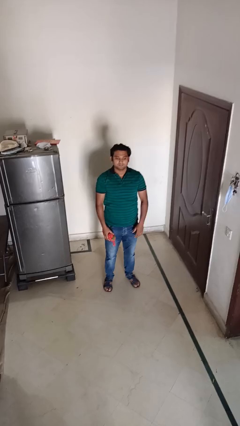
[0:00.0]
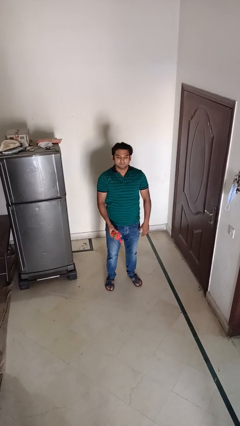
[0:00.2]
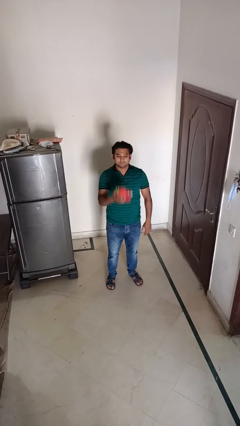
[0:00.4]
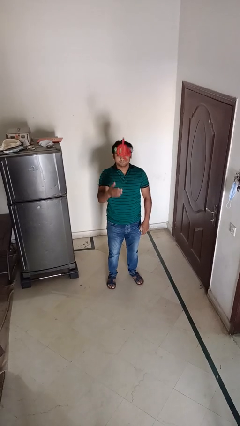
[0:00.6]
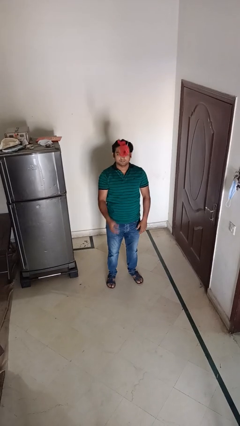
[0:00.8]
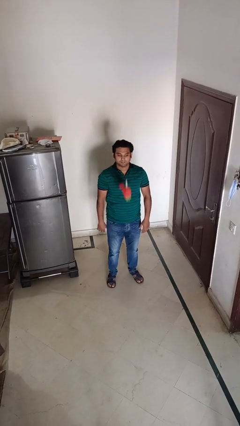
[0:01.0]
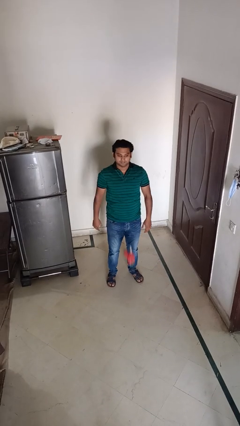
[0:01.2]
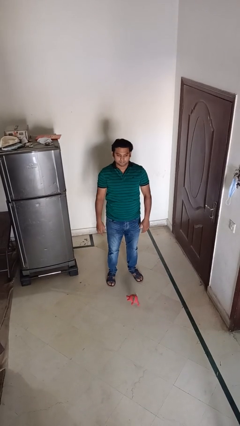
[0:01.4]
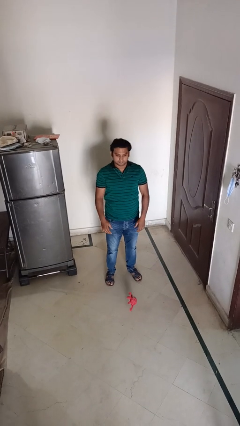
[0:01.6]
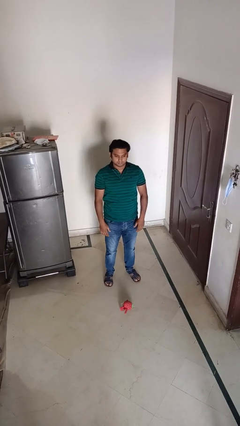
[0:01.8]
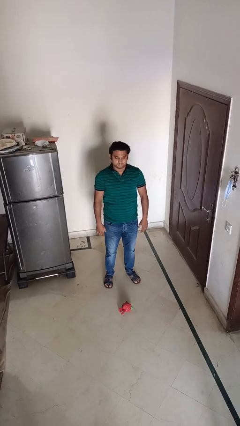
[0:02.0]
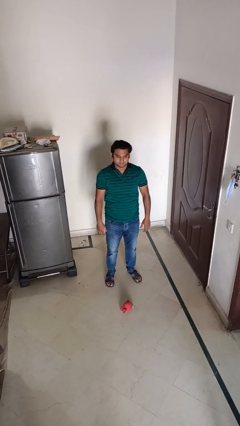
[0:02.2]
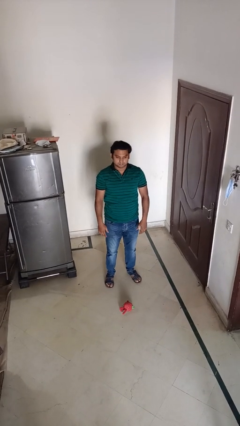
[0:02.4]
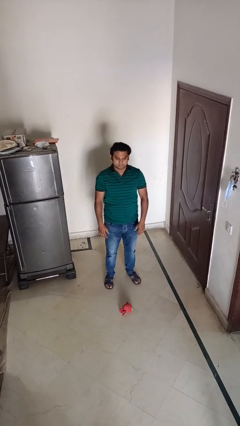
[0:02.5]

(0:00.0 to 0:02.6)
person throws object into air

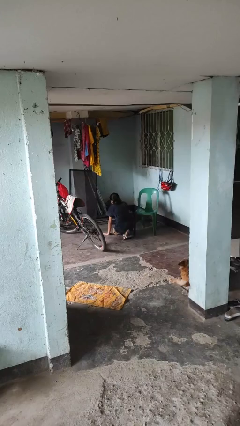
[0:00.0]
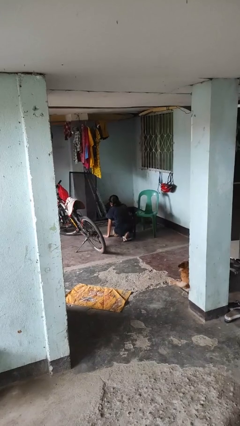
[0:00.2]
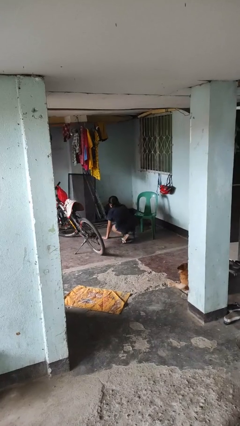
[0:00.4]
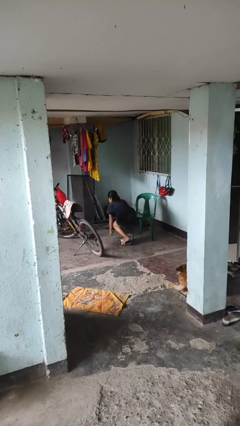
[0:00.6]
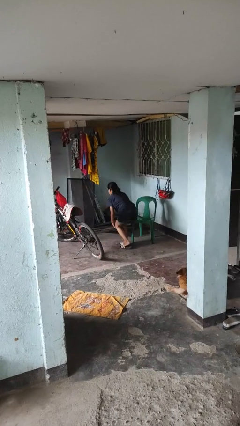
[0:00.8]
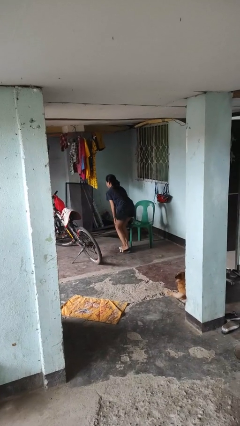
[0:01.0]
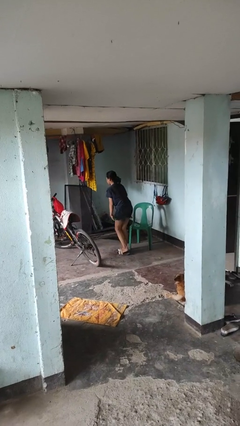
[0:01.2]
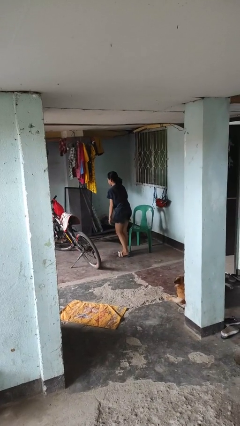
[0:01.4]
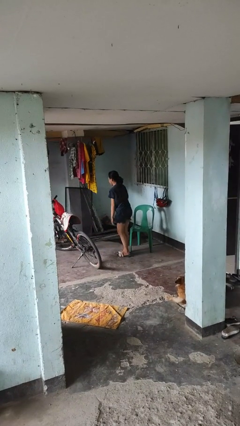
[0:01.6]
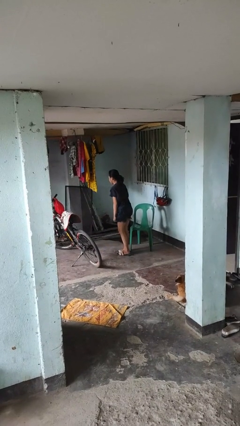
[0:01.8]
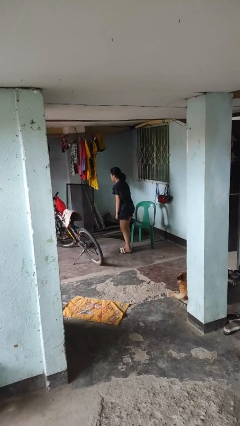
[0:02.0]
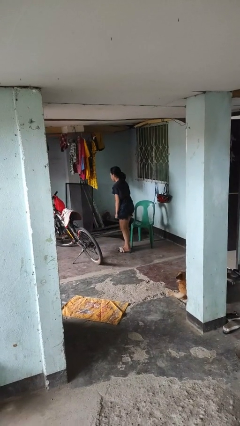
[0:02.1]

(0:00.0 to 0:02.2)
person stands up from floor

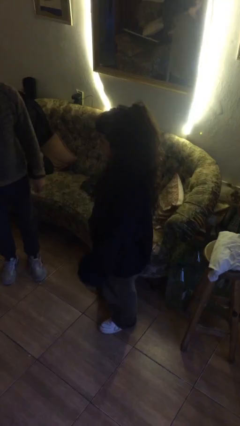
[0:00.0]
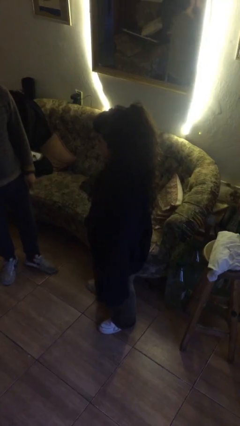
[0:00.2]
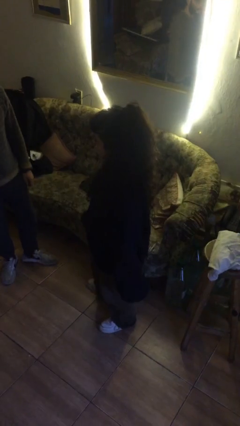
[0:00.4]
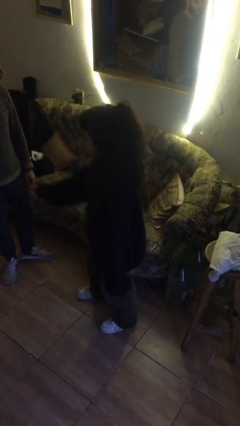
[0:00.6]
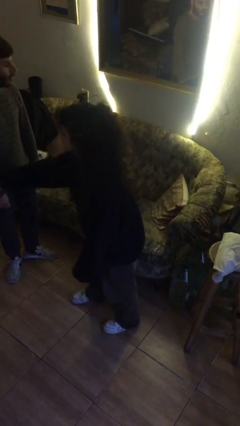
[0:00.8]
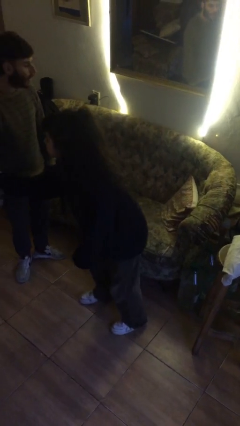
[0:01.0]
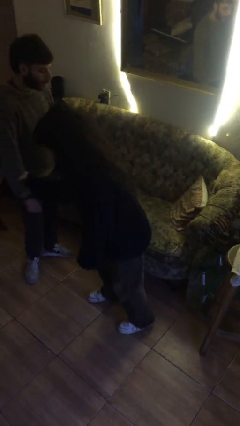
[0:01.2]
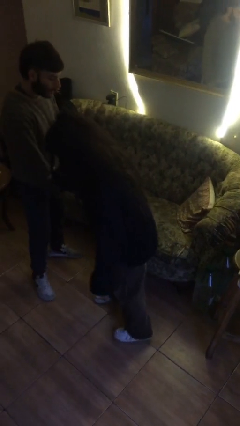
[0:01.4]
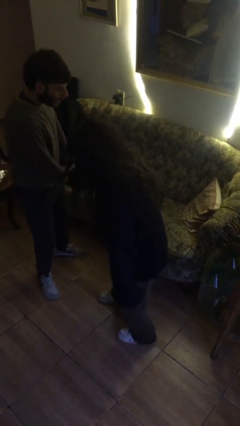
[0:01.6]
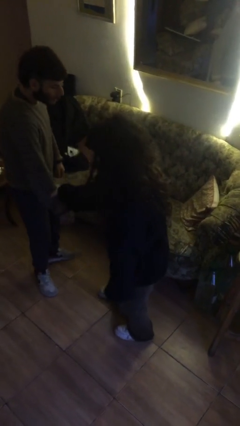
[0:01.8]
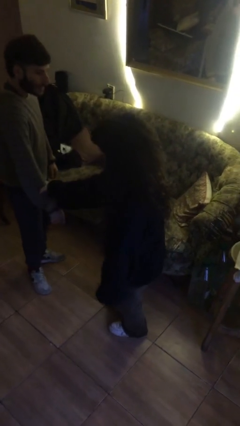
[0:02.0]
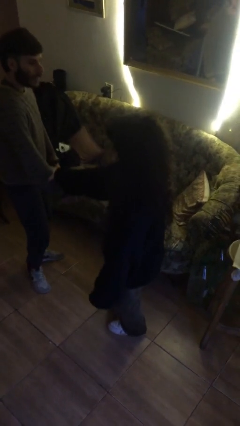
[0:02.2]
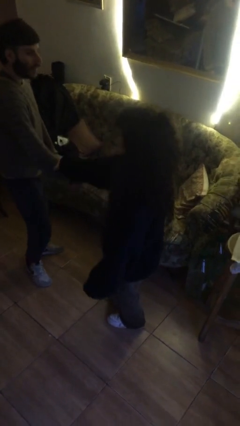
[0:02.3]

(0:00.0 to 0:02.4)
person grabs person by forearm

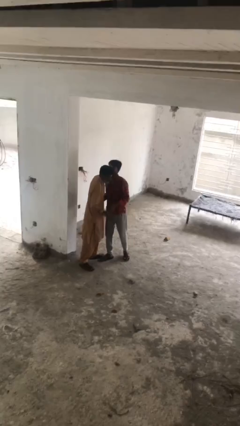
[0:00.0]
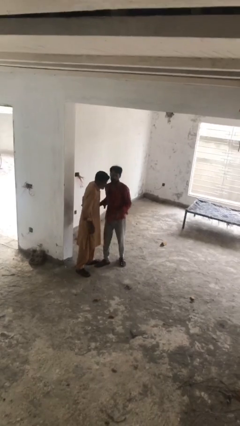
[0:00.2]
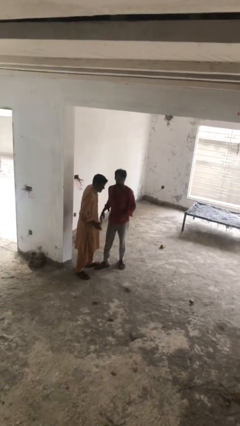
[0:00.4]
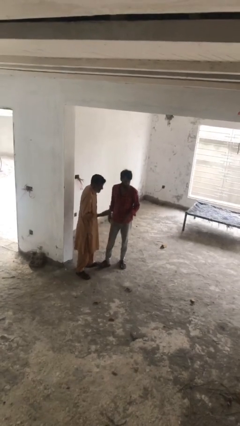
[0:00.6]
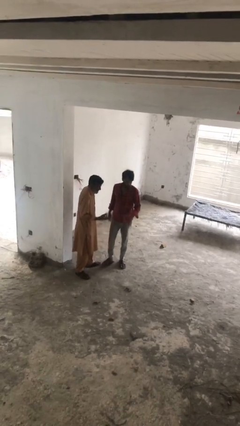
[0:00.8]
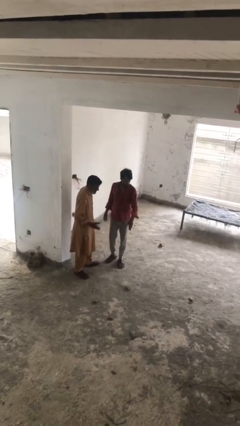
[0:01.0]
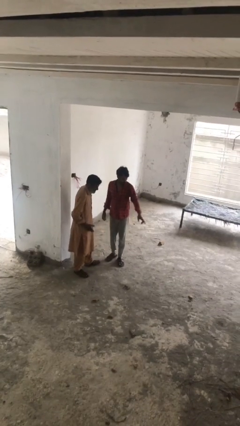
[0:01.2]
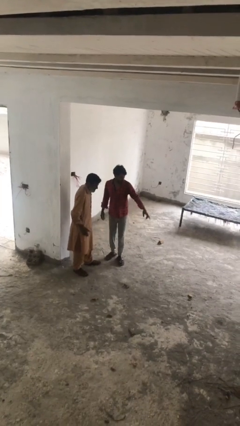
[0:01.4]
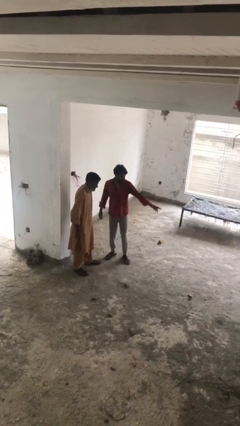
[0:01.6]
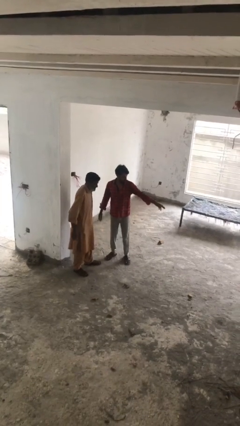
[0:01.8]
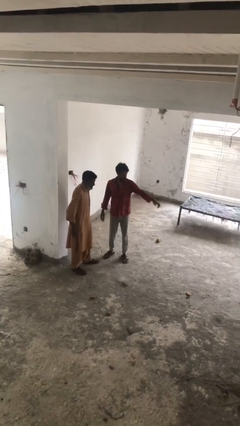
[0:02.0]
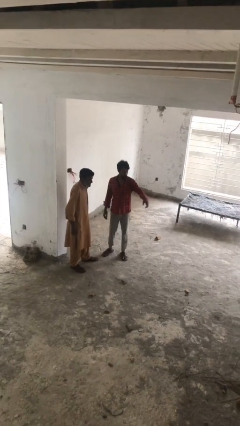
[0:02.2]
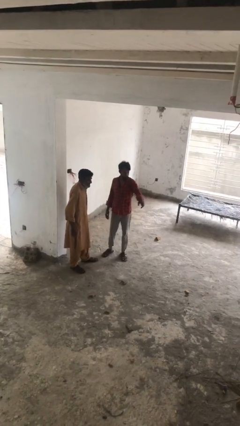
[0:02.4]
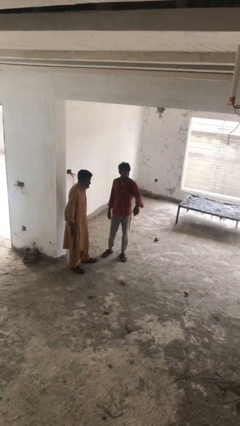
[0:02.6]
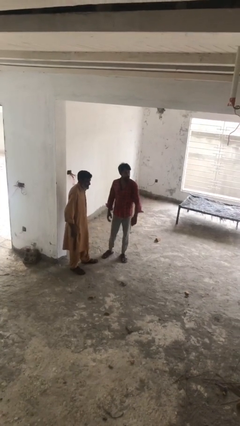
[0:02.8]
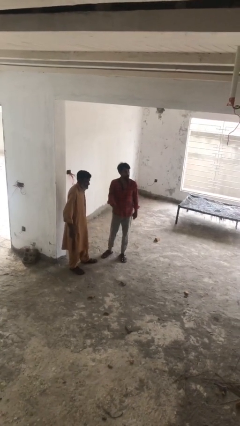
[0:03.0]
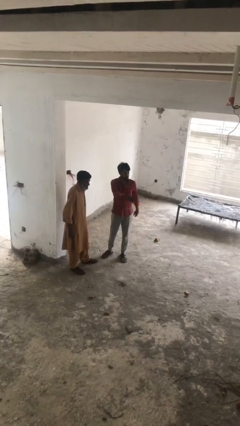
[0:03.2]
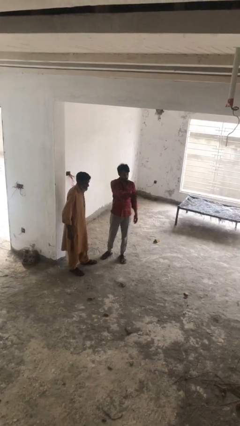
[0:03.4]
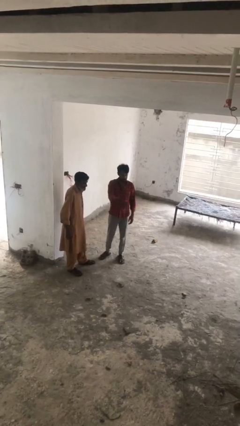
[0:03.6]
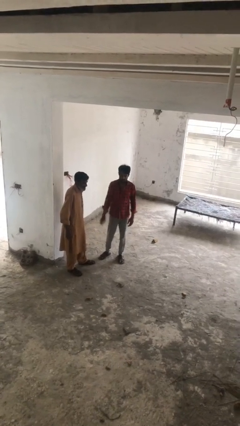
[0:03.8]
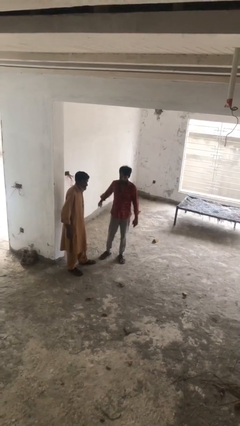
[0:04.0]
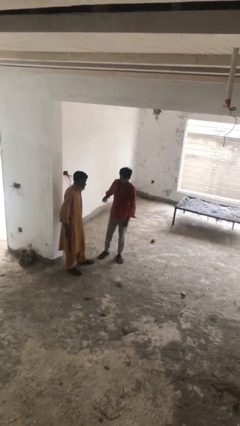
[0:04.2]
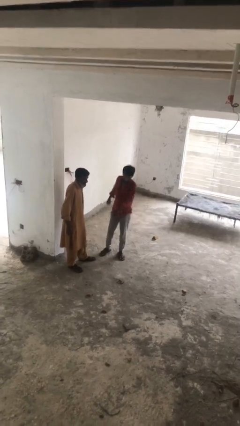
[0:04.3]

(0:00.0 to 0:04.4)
person talks to person

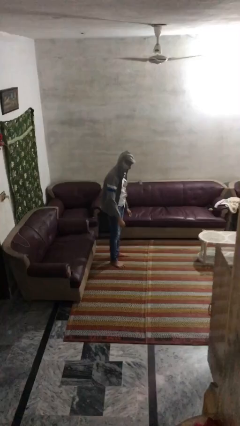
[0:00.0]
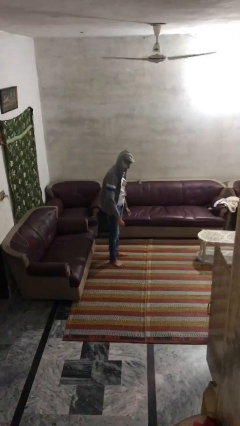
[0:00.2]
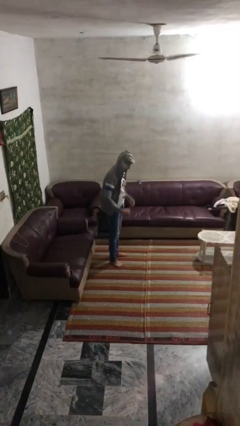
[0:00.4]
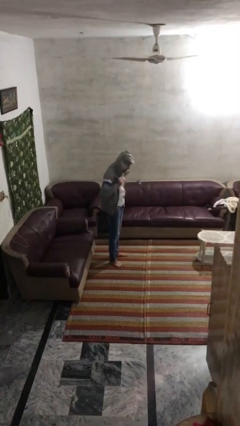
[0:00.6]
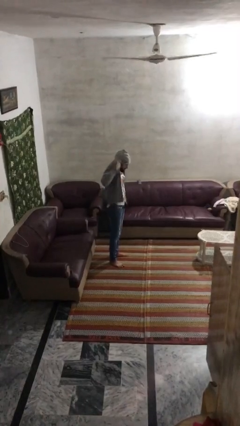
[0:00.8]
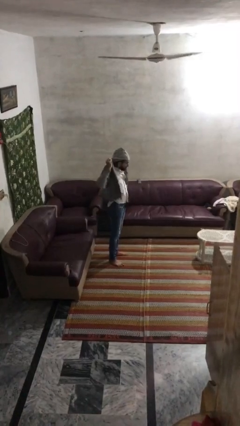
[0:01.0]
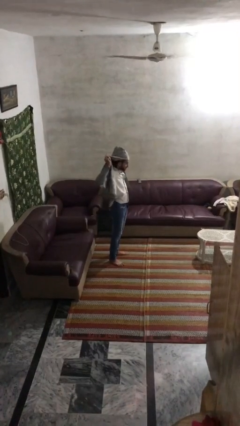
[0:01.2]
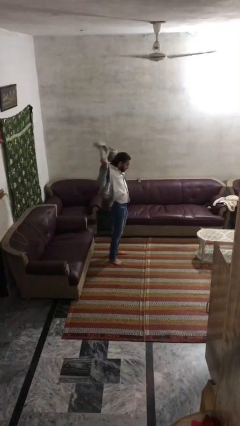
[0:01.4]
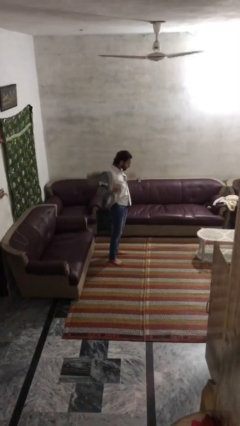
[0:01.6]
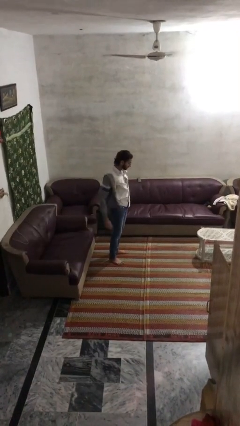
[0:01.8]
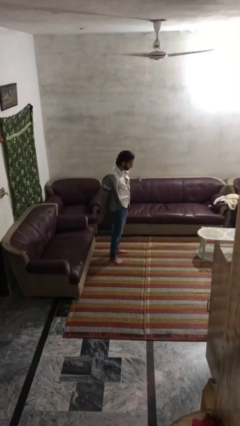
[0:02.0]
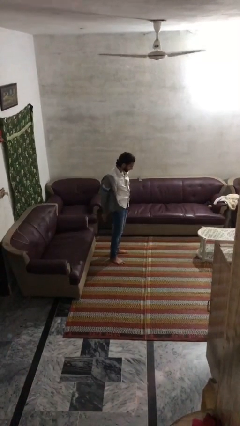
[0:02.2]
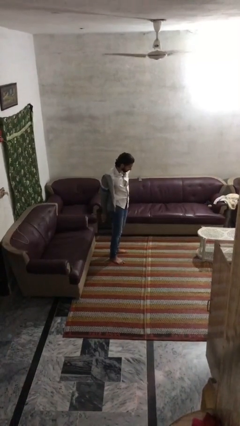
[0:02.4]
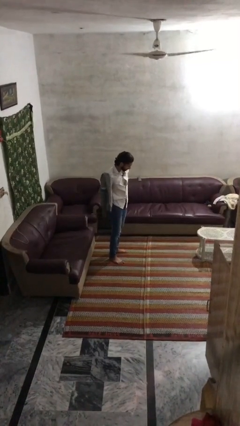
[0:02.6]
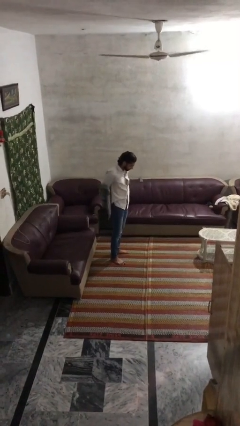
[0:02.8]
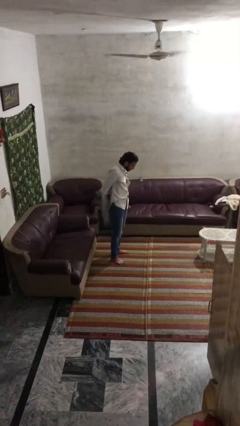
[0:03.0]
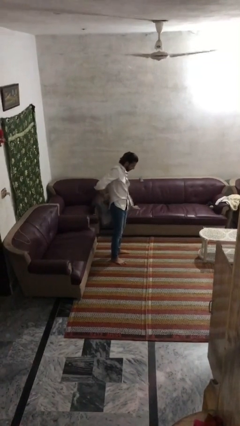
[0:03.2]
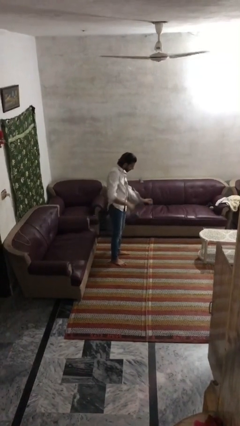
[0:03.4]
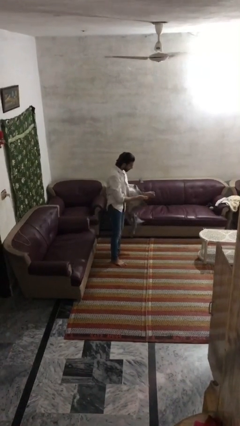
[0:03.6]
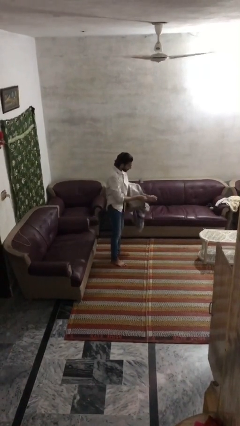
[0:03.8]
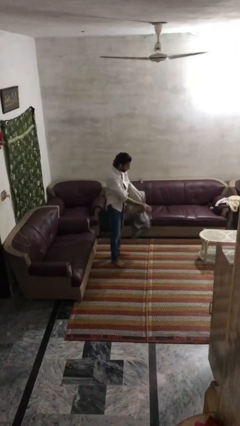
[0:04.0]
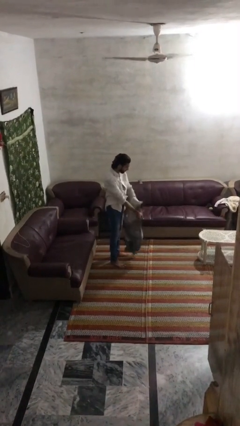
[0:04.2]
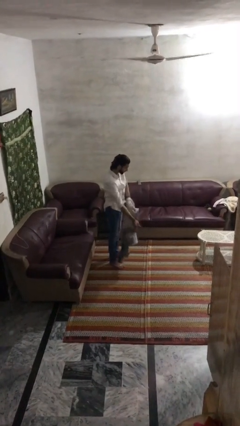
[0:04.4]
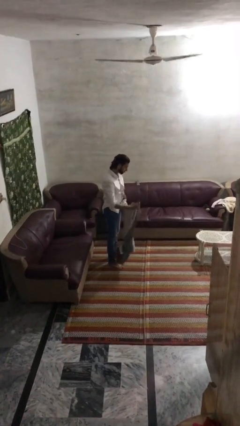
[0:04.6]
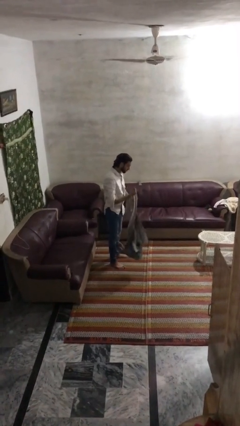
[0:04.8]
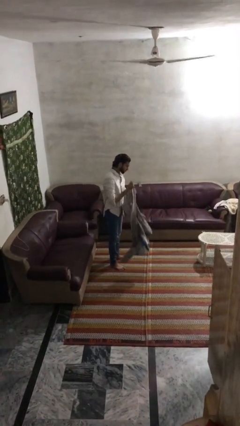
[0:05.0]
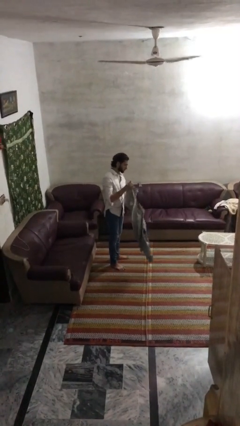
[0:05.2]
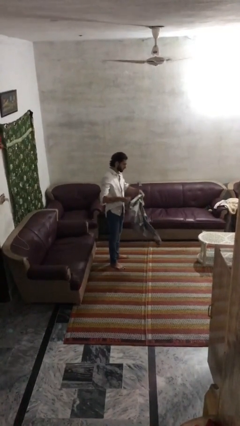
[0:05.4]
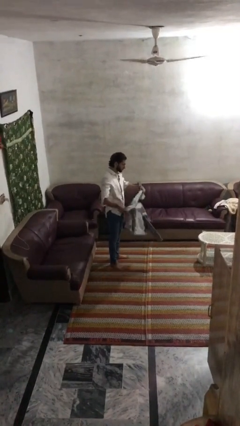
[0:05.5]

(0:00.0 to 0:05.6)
person takes off hoodie

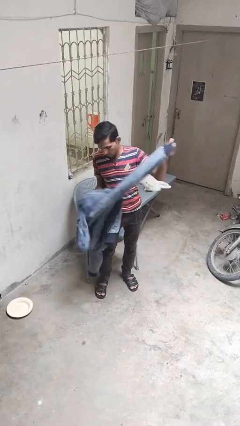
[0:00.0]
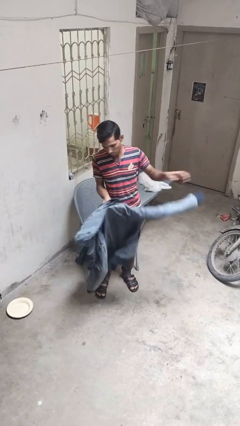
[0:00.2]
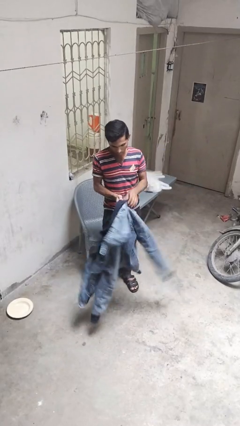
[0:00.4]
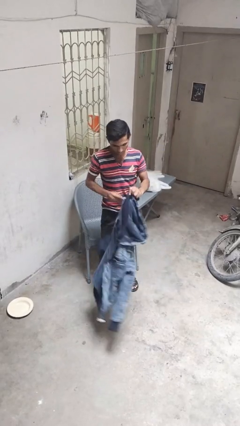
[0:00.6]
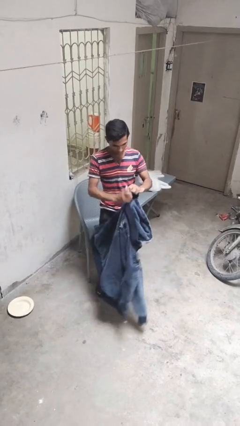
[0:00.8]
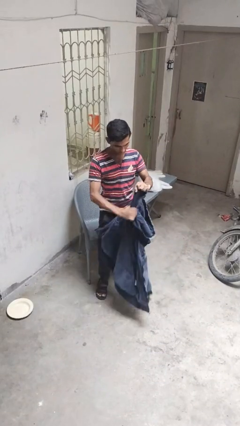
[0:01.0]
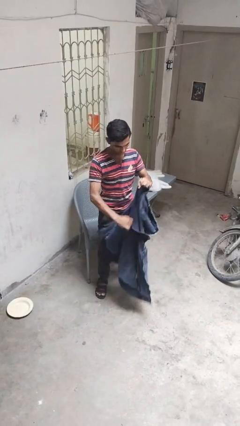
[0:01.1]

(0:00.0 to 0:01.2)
person takes off jacket
